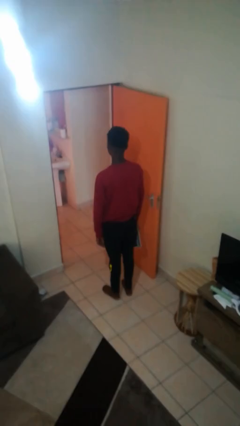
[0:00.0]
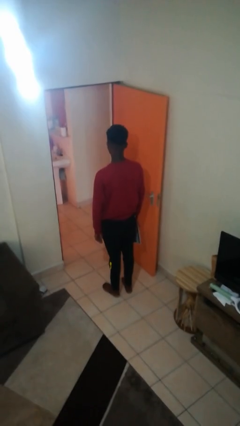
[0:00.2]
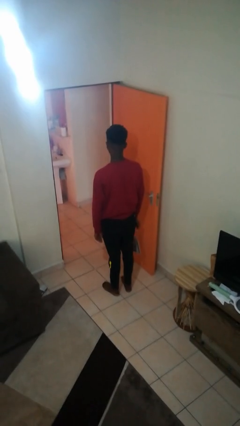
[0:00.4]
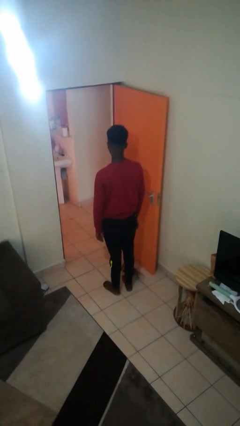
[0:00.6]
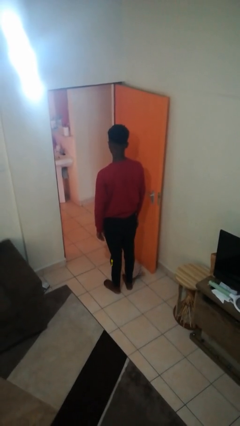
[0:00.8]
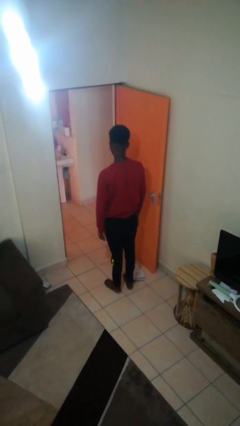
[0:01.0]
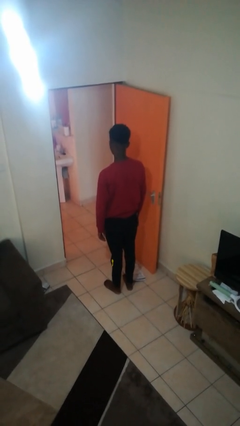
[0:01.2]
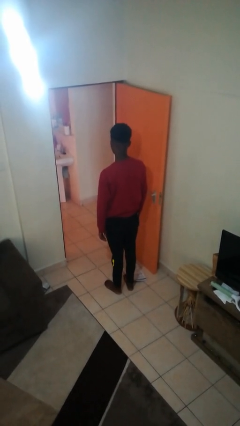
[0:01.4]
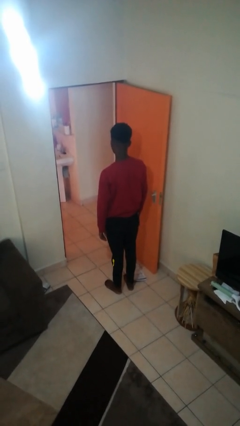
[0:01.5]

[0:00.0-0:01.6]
person drops object

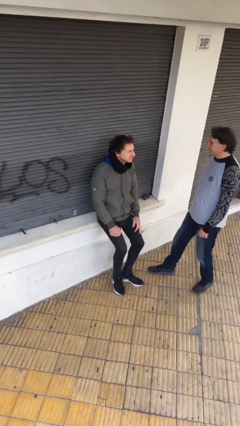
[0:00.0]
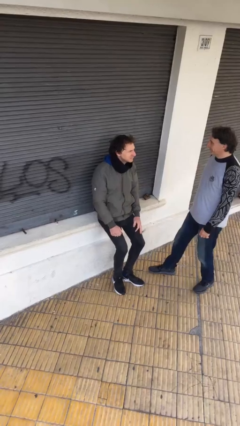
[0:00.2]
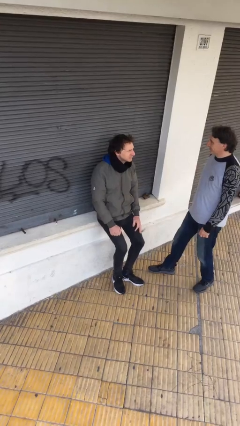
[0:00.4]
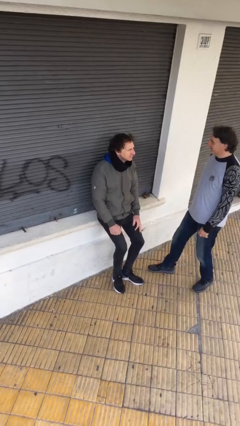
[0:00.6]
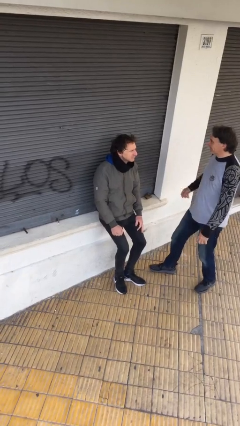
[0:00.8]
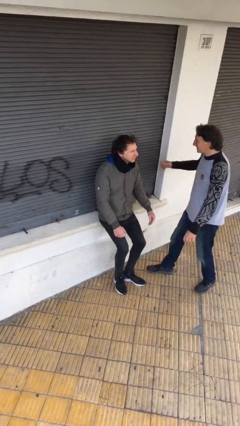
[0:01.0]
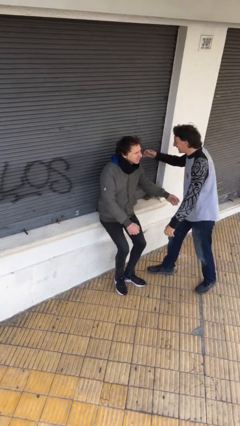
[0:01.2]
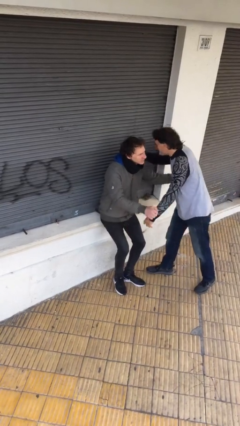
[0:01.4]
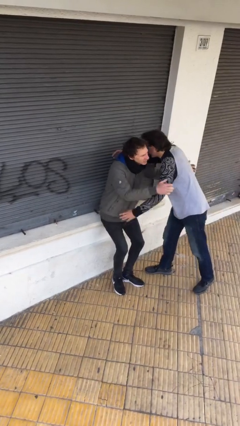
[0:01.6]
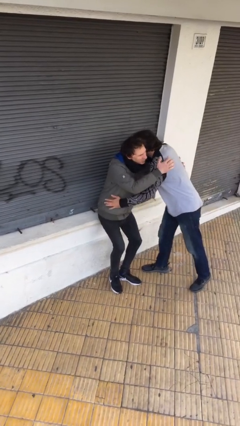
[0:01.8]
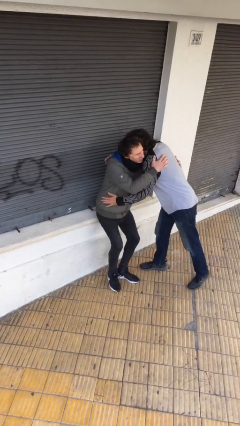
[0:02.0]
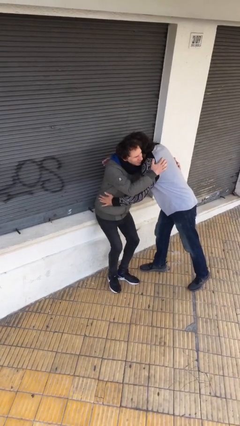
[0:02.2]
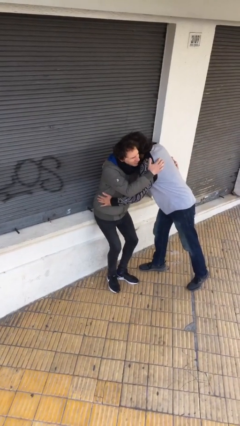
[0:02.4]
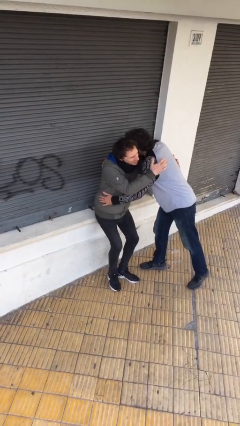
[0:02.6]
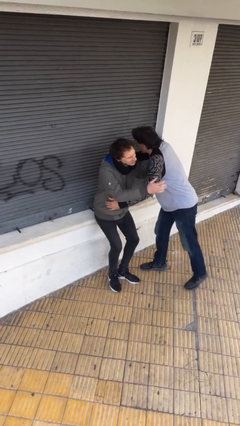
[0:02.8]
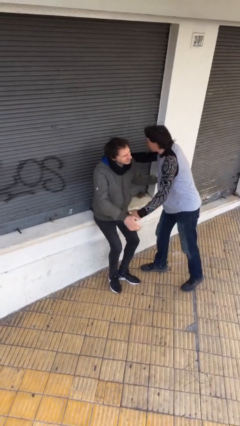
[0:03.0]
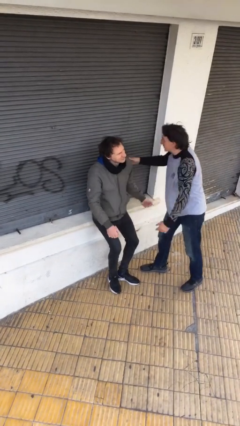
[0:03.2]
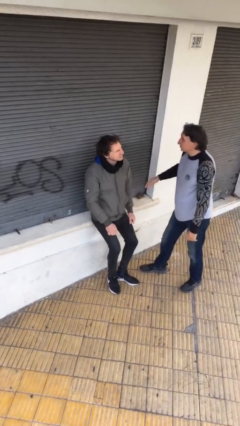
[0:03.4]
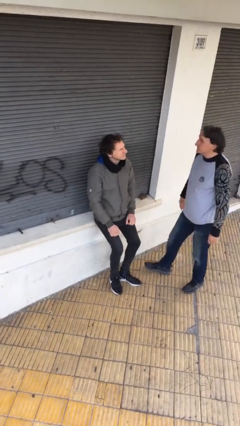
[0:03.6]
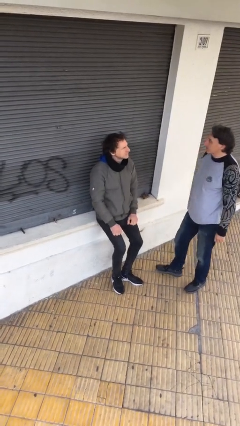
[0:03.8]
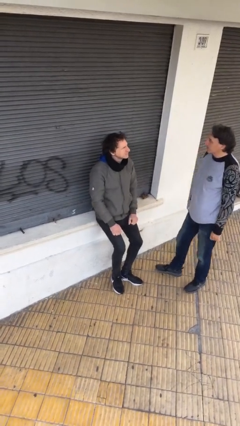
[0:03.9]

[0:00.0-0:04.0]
person embraces person

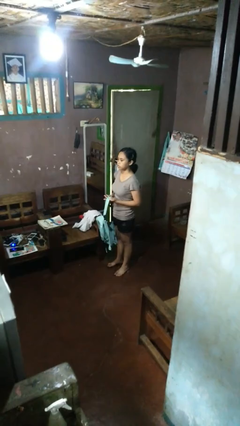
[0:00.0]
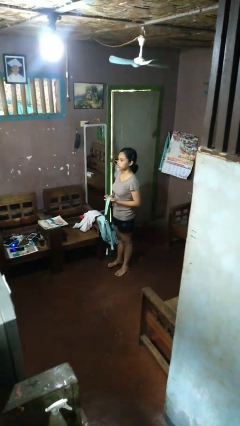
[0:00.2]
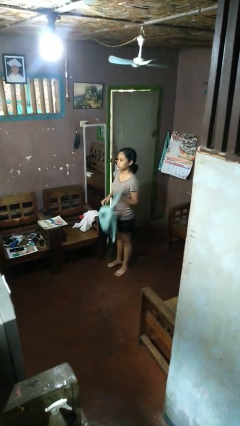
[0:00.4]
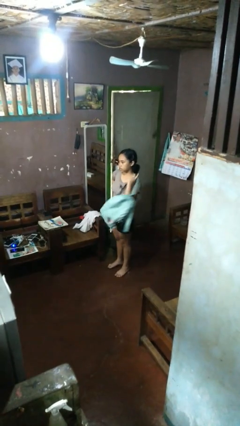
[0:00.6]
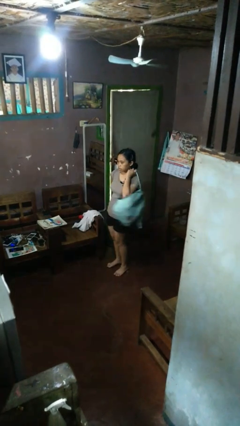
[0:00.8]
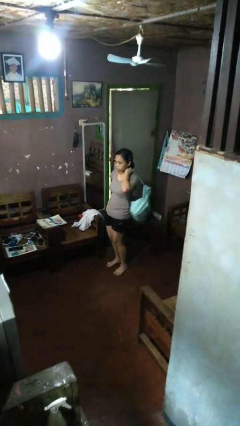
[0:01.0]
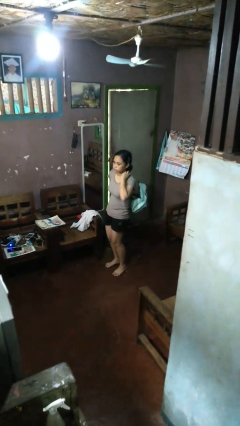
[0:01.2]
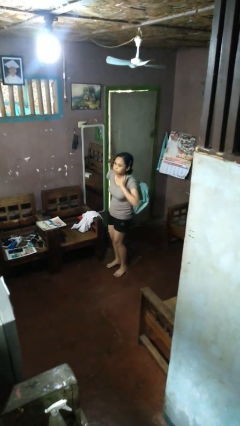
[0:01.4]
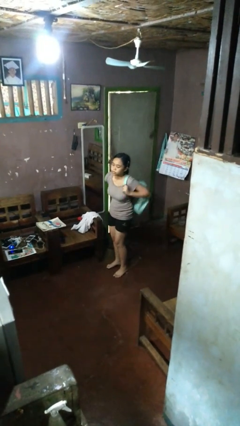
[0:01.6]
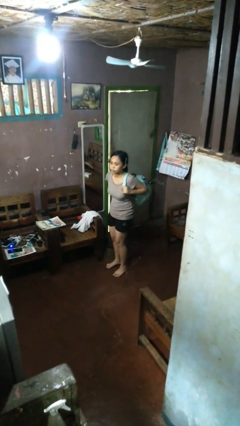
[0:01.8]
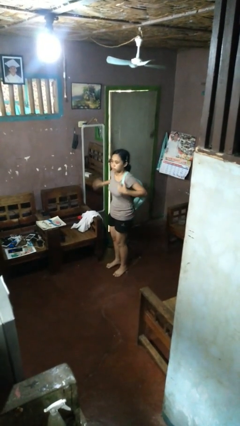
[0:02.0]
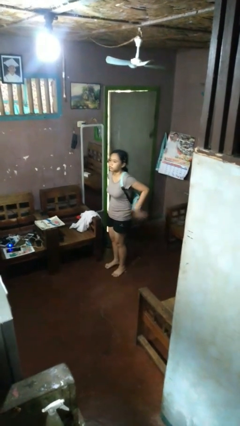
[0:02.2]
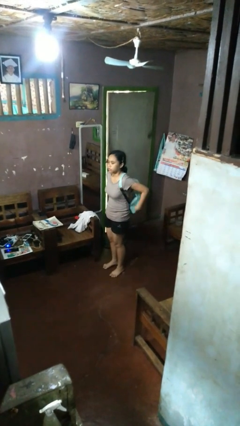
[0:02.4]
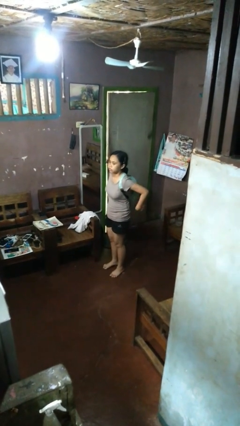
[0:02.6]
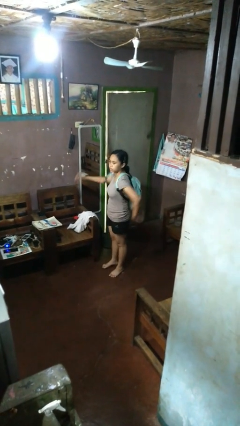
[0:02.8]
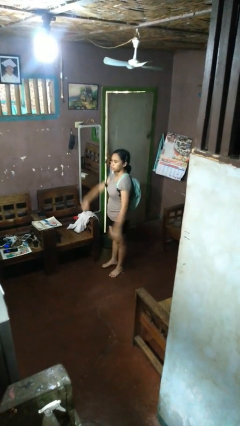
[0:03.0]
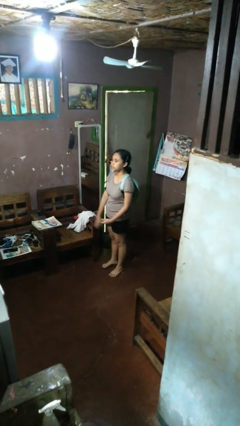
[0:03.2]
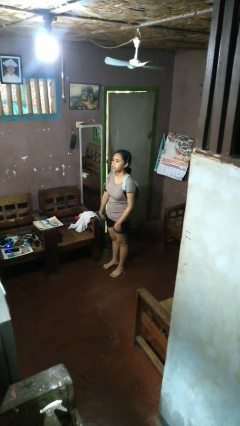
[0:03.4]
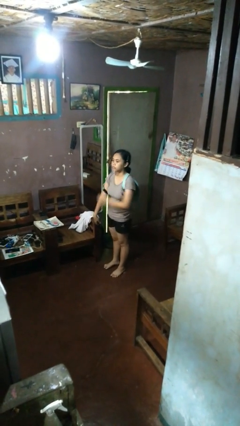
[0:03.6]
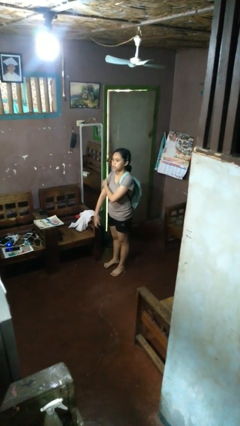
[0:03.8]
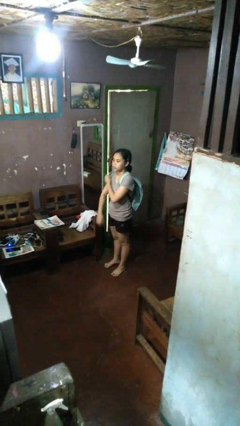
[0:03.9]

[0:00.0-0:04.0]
person puts on backpack

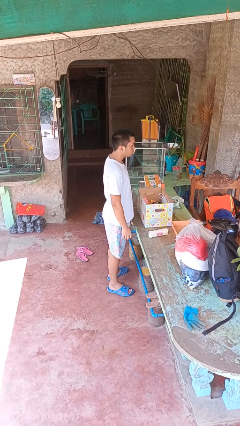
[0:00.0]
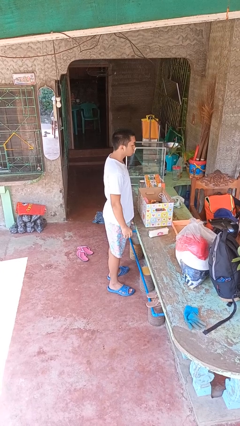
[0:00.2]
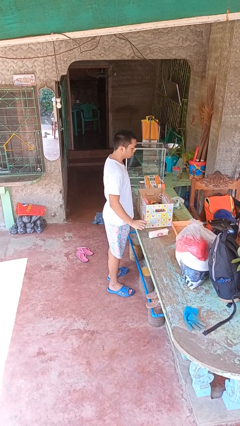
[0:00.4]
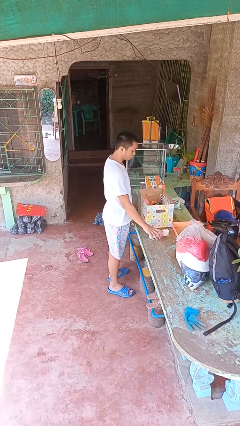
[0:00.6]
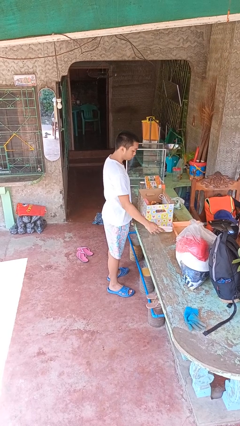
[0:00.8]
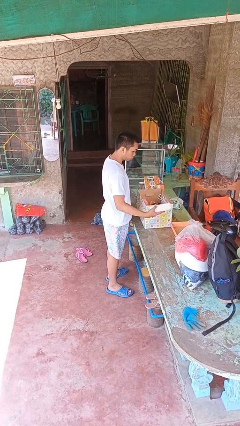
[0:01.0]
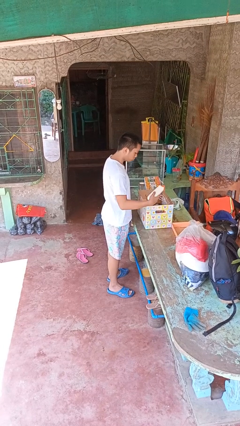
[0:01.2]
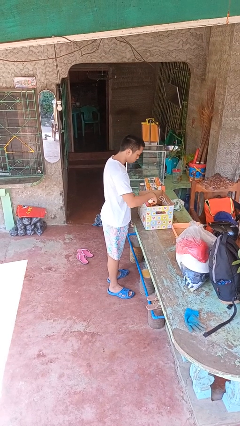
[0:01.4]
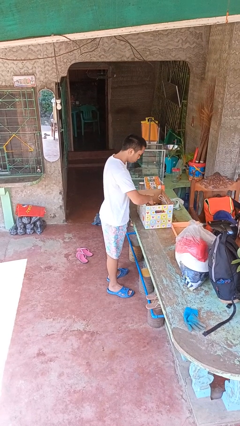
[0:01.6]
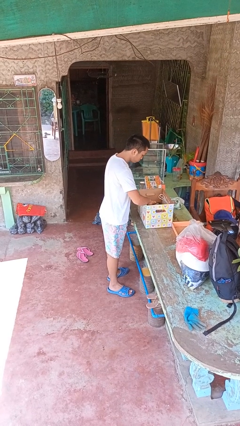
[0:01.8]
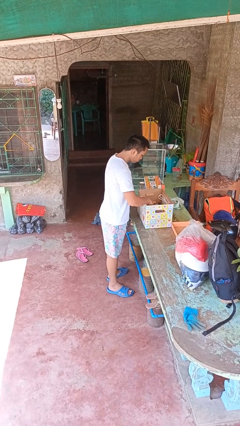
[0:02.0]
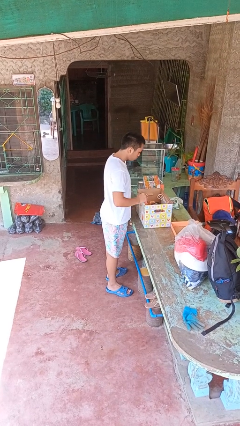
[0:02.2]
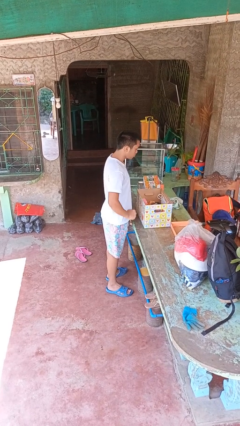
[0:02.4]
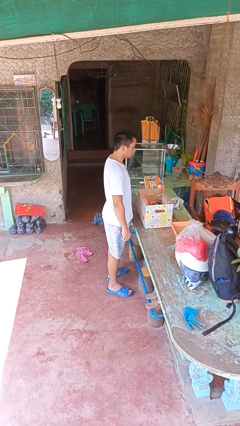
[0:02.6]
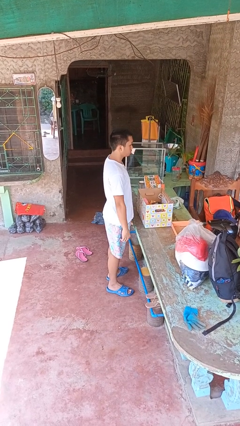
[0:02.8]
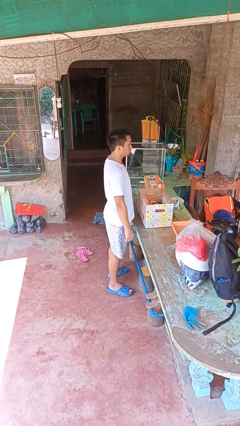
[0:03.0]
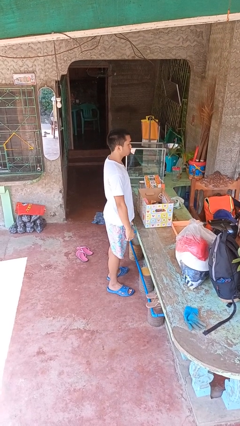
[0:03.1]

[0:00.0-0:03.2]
person puts object into box

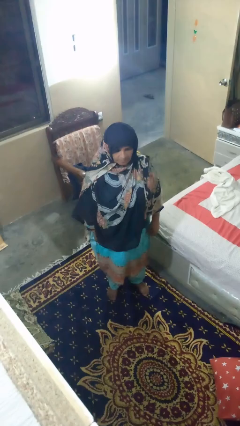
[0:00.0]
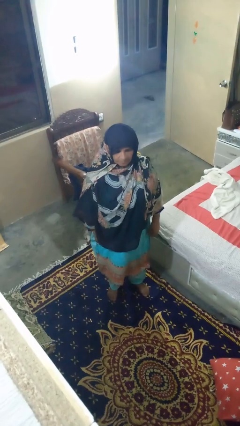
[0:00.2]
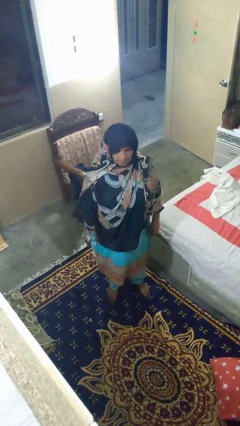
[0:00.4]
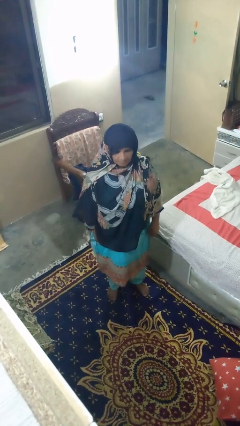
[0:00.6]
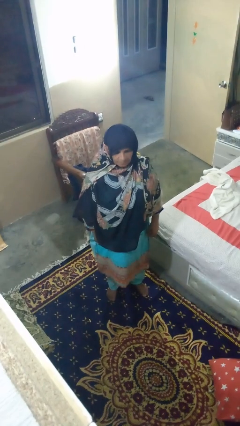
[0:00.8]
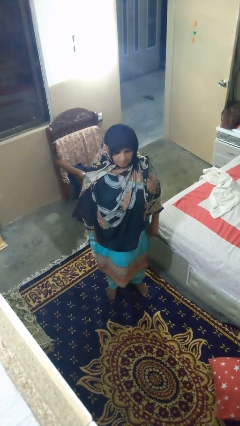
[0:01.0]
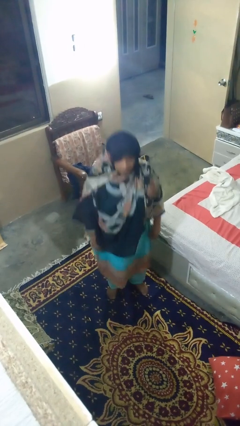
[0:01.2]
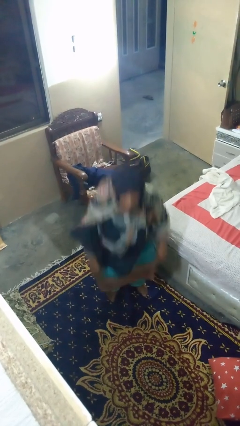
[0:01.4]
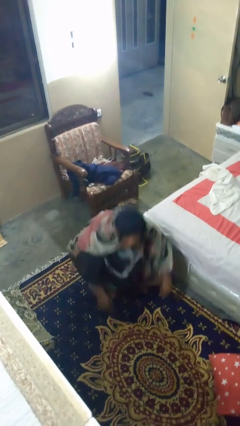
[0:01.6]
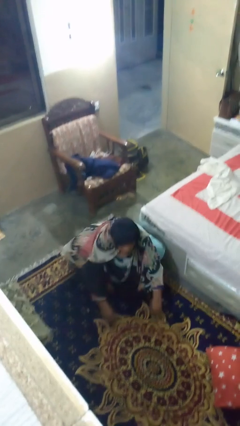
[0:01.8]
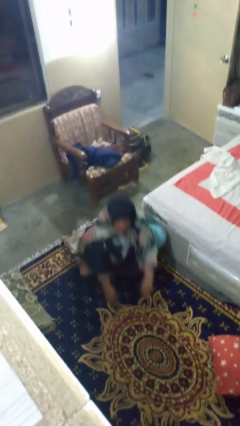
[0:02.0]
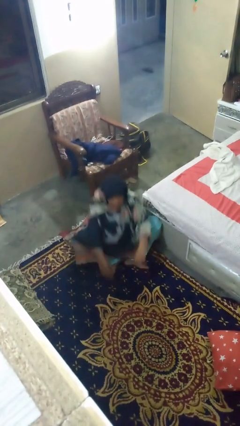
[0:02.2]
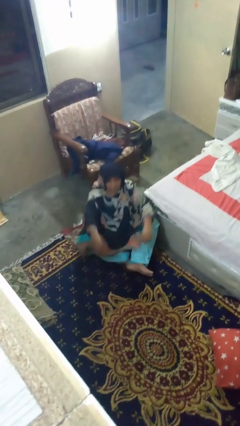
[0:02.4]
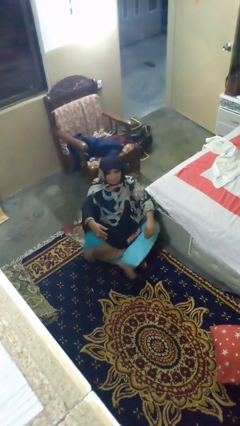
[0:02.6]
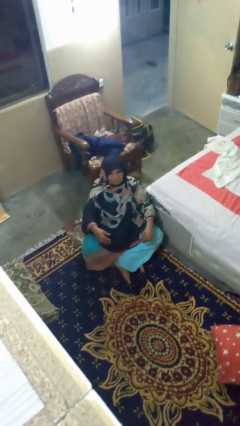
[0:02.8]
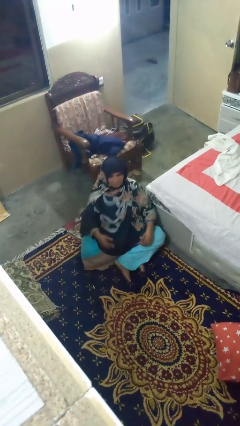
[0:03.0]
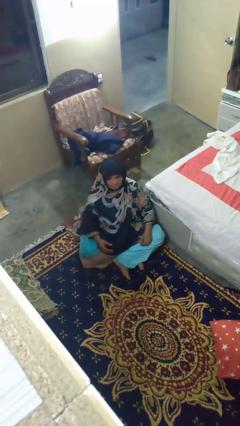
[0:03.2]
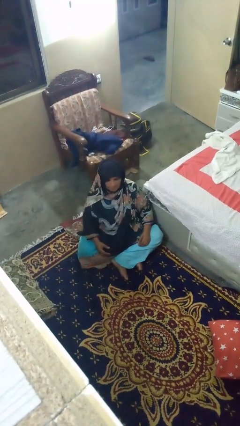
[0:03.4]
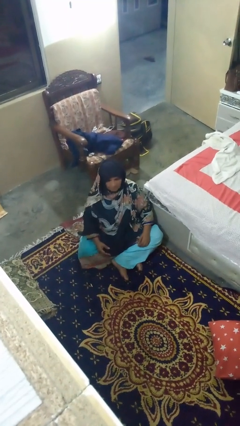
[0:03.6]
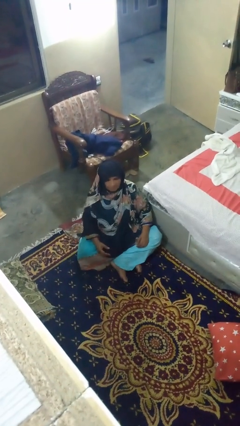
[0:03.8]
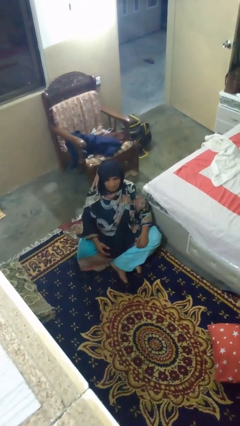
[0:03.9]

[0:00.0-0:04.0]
person sits crisscross

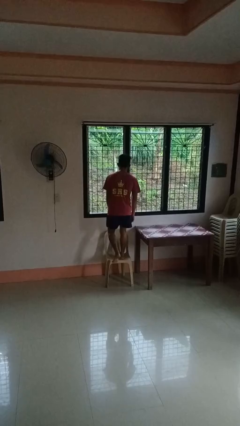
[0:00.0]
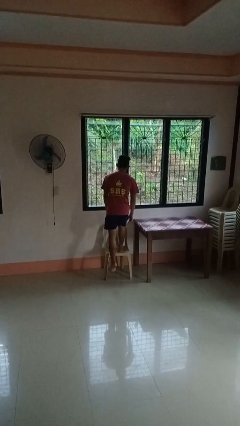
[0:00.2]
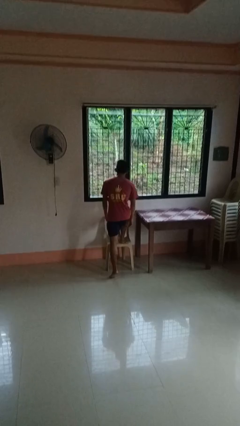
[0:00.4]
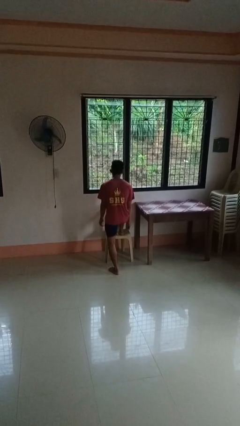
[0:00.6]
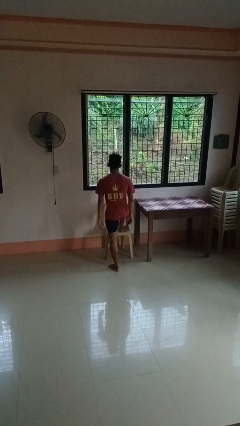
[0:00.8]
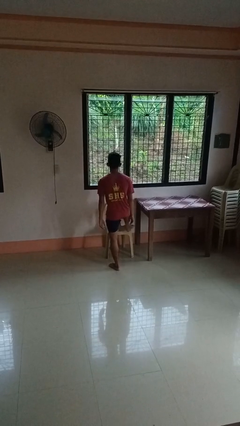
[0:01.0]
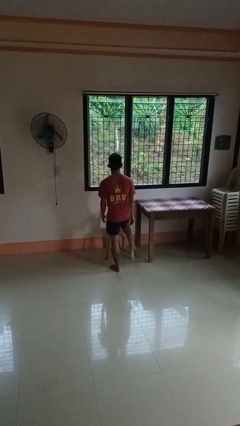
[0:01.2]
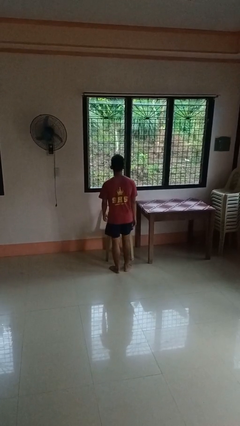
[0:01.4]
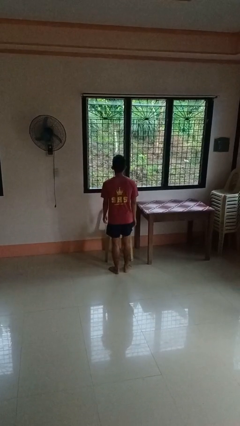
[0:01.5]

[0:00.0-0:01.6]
person climbs off chair
